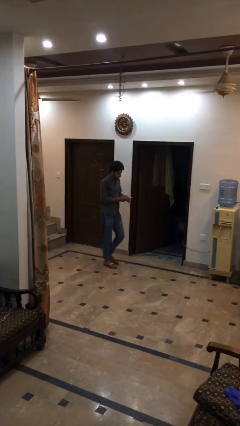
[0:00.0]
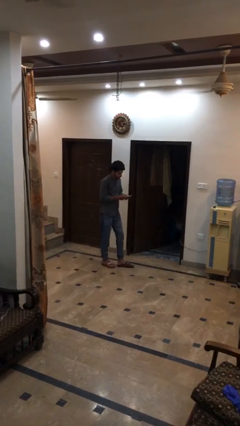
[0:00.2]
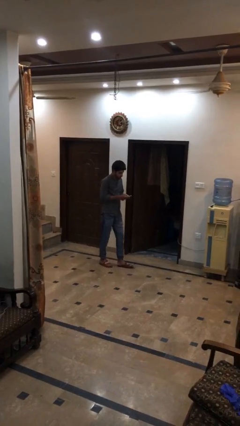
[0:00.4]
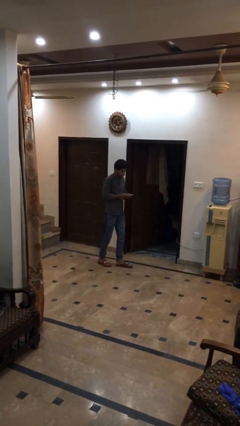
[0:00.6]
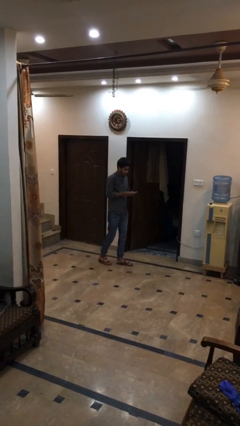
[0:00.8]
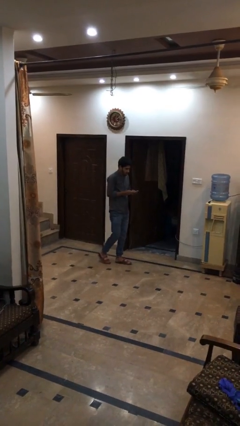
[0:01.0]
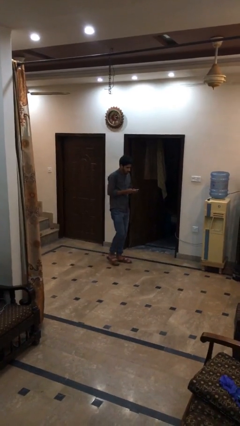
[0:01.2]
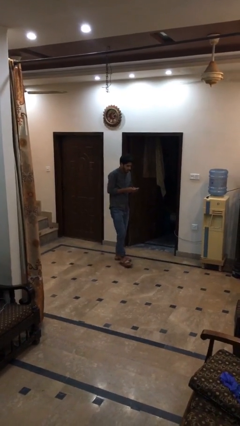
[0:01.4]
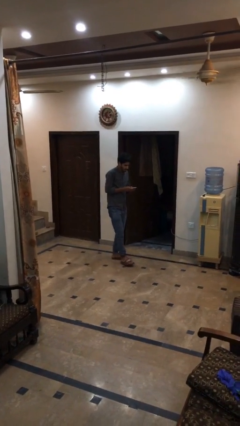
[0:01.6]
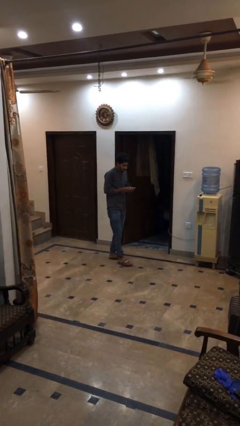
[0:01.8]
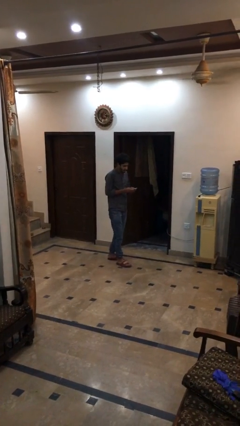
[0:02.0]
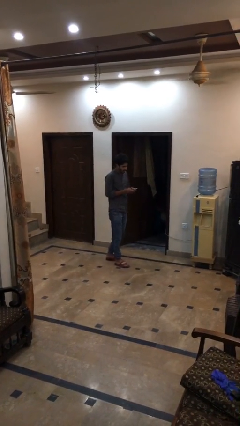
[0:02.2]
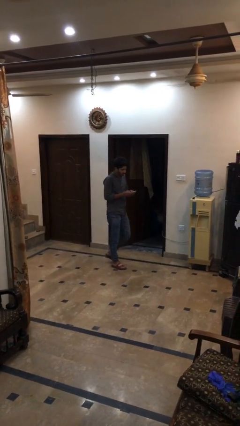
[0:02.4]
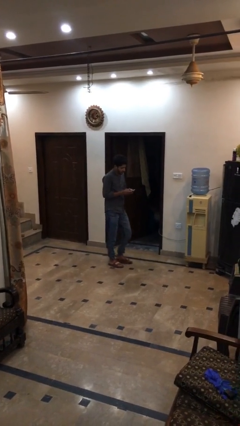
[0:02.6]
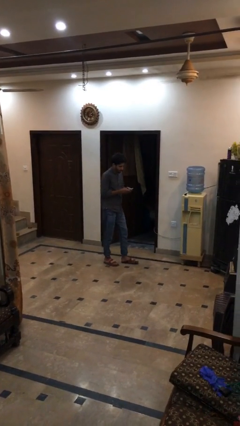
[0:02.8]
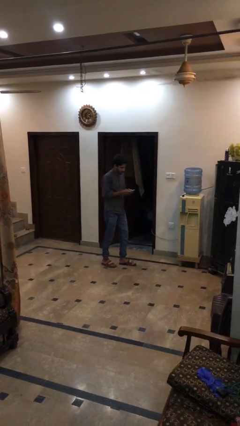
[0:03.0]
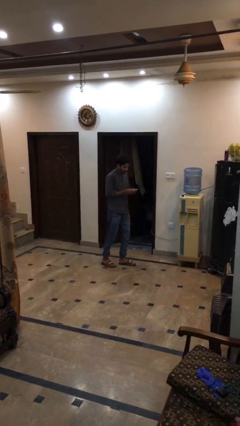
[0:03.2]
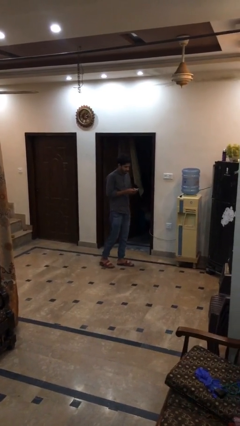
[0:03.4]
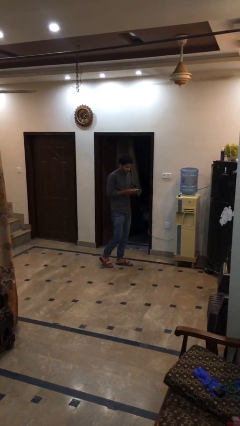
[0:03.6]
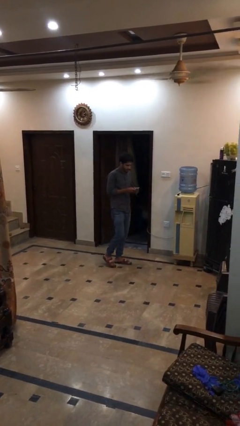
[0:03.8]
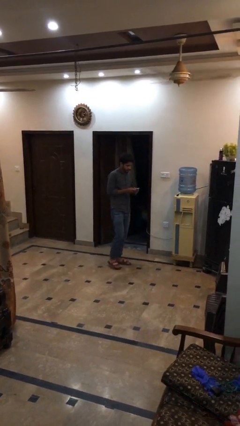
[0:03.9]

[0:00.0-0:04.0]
person texts on phone

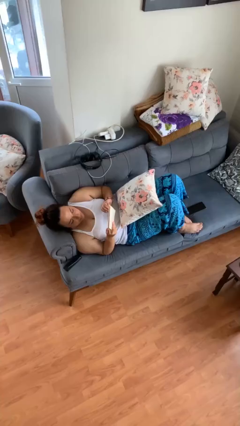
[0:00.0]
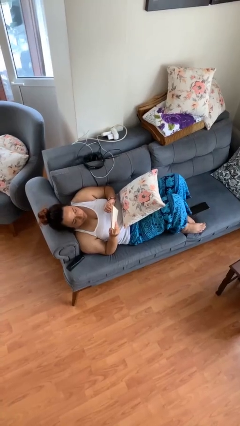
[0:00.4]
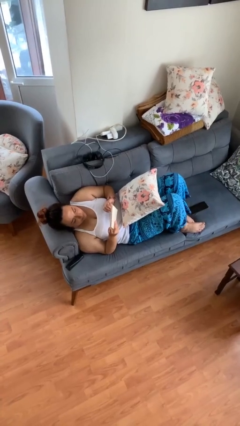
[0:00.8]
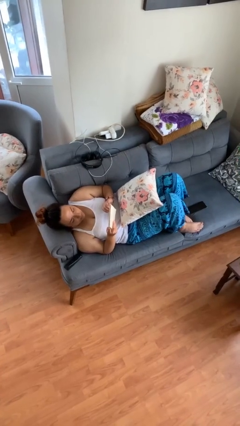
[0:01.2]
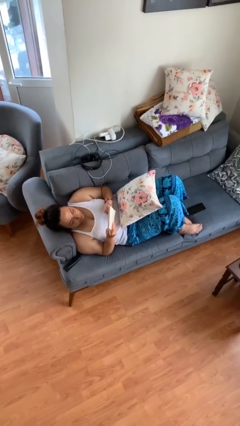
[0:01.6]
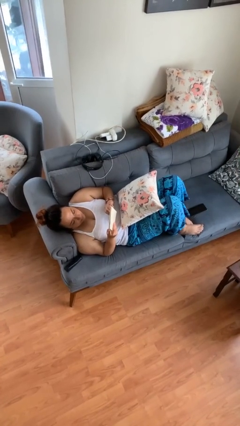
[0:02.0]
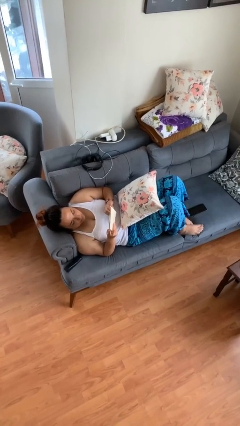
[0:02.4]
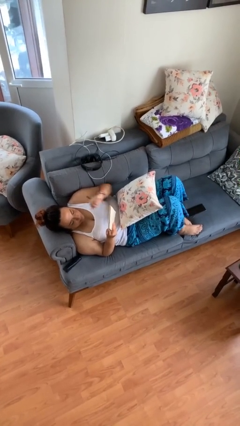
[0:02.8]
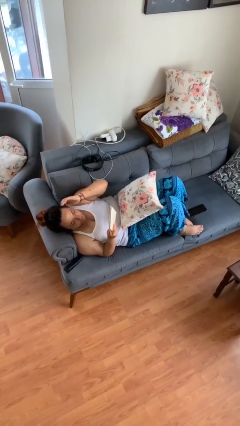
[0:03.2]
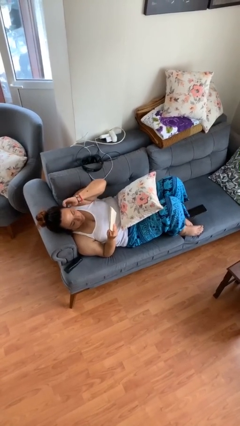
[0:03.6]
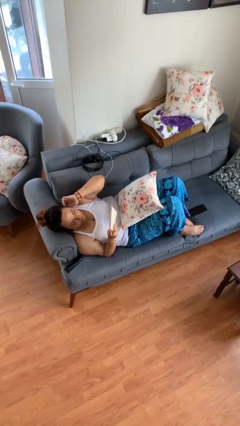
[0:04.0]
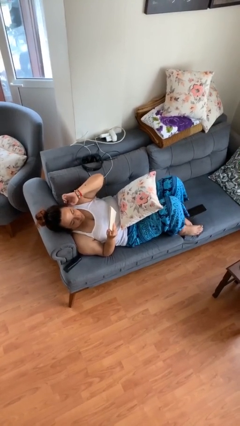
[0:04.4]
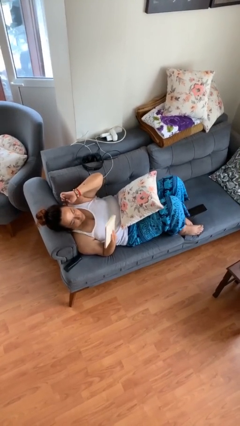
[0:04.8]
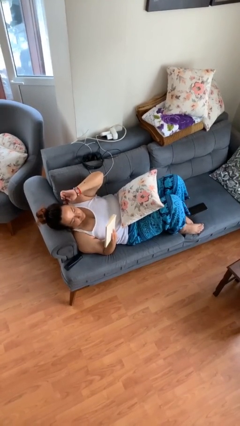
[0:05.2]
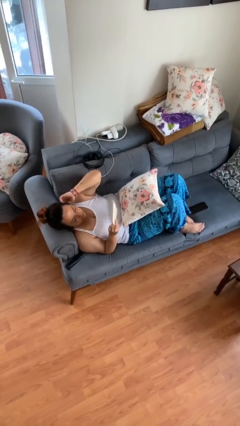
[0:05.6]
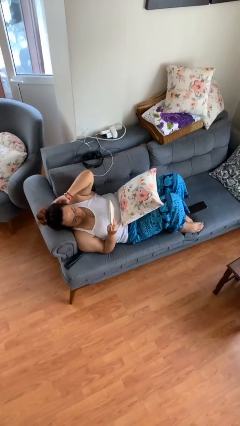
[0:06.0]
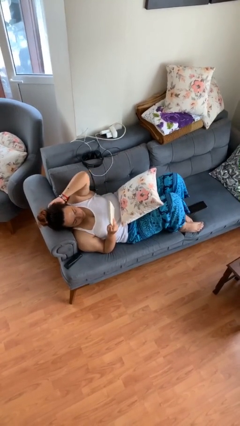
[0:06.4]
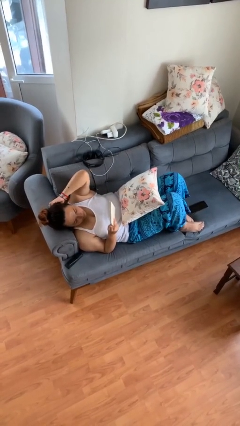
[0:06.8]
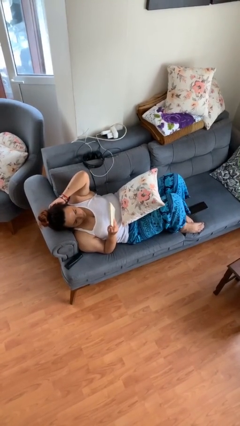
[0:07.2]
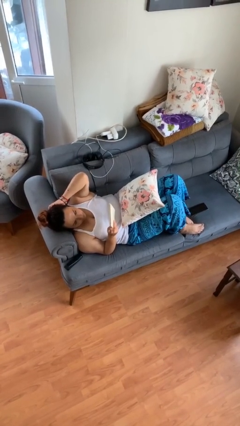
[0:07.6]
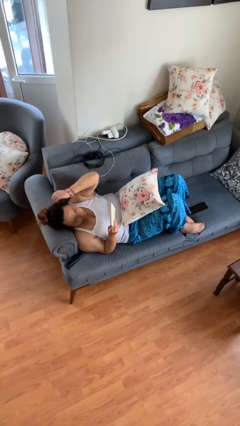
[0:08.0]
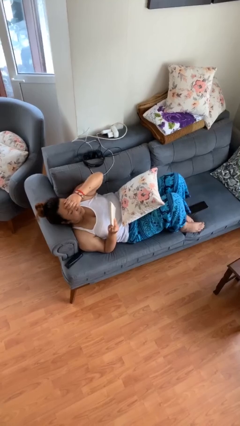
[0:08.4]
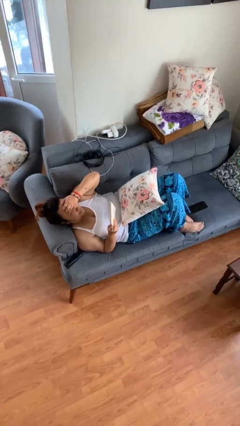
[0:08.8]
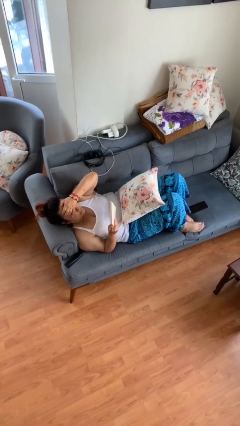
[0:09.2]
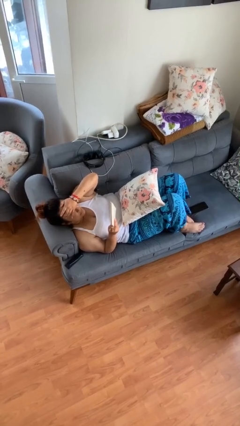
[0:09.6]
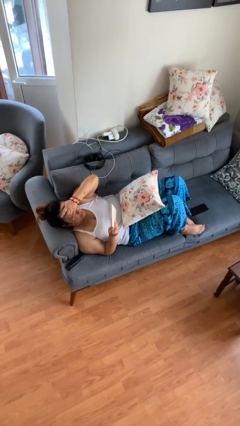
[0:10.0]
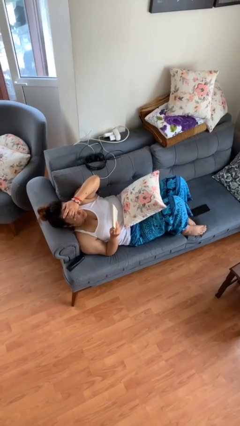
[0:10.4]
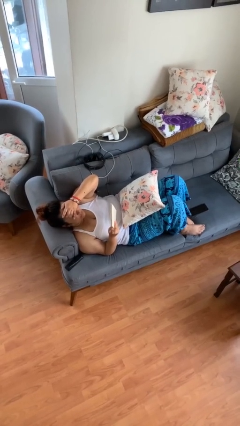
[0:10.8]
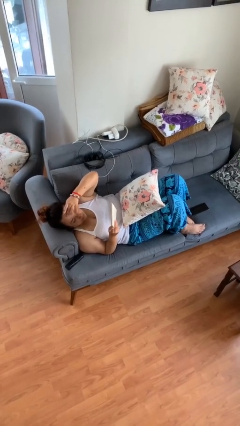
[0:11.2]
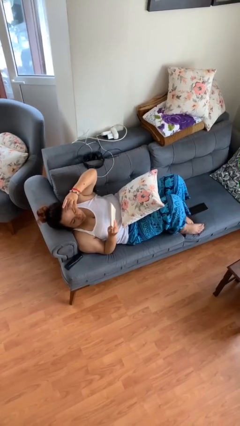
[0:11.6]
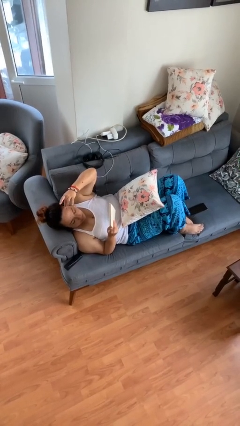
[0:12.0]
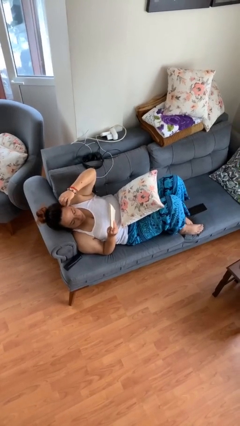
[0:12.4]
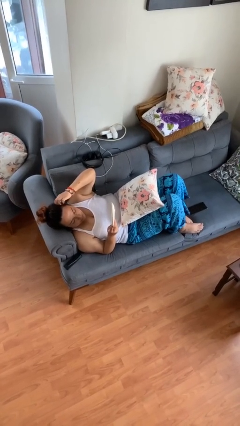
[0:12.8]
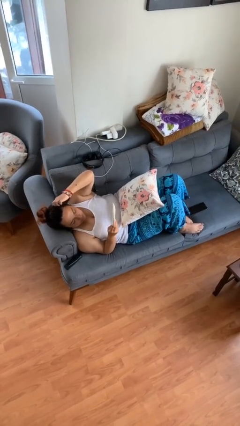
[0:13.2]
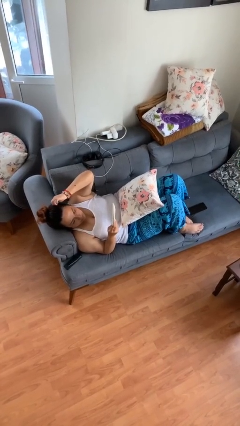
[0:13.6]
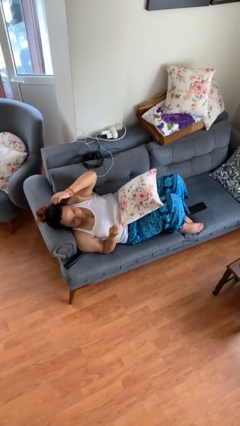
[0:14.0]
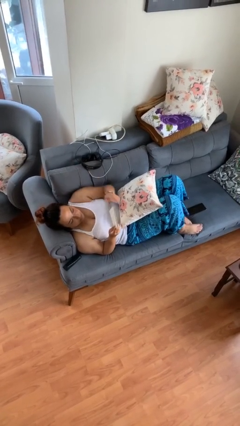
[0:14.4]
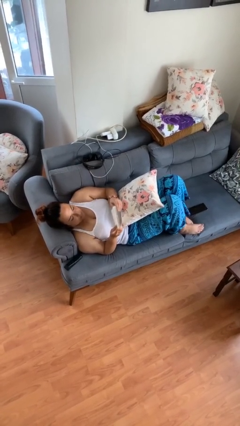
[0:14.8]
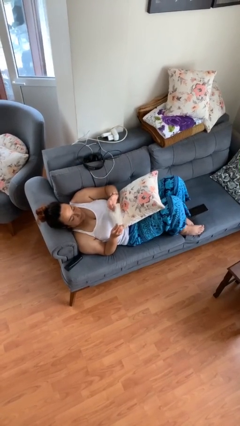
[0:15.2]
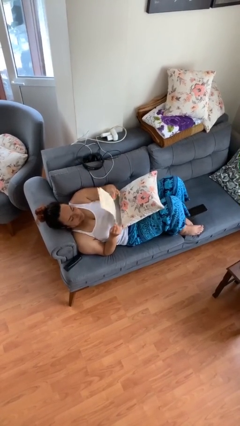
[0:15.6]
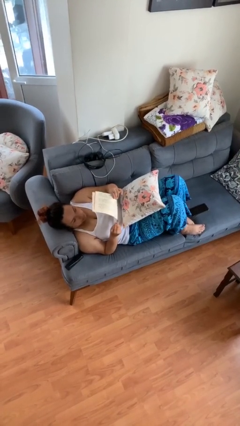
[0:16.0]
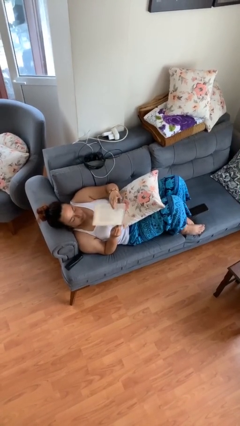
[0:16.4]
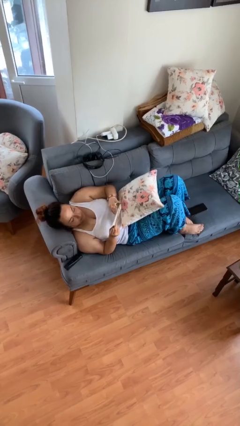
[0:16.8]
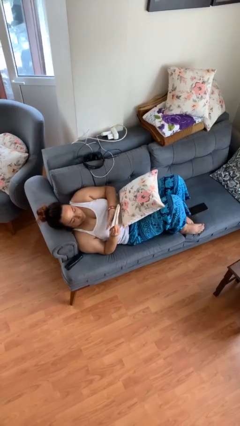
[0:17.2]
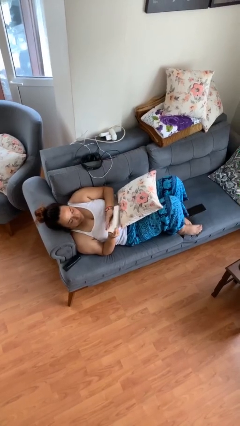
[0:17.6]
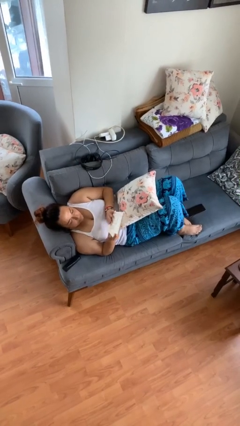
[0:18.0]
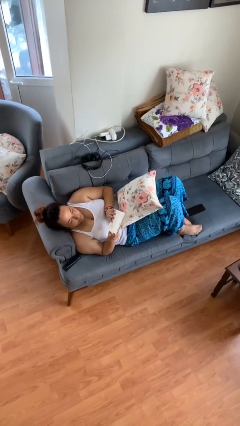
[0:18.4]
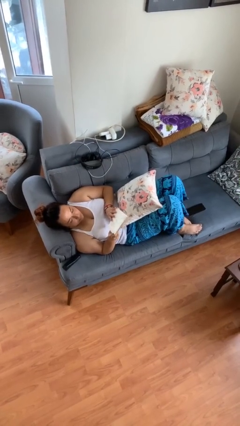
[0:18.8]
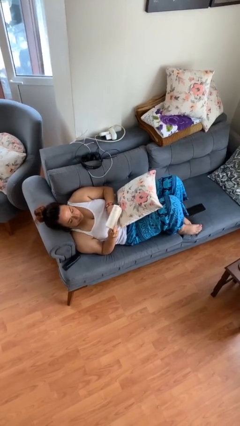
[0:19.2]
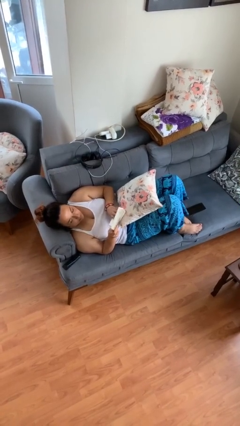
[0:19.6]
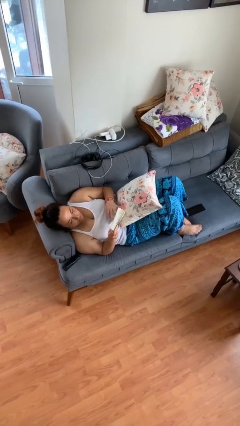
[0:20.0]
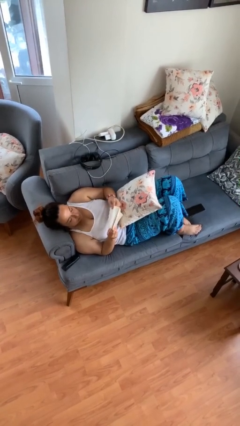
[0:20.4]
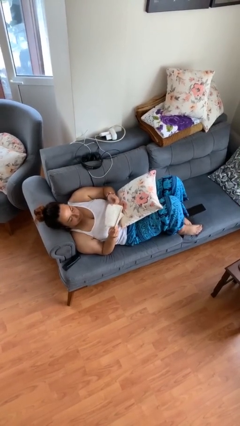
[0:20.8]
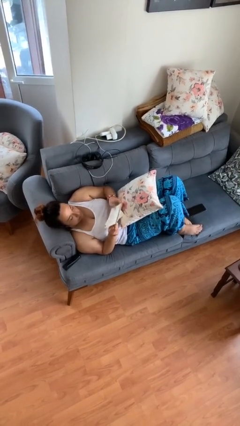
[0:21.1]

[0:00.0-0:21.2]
person reads document

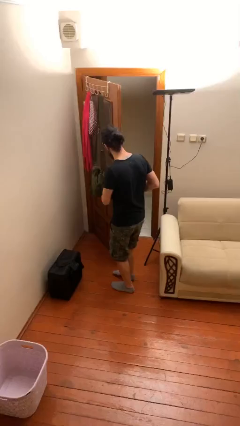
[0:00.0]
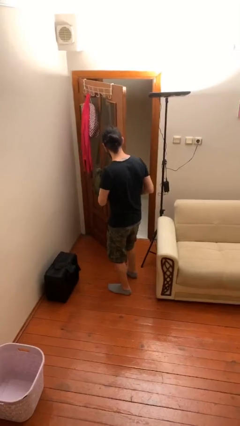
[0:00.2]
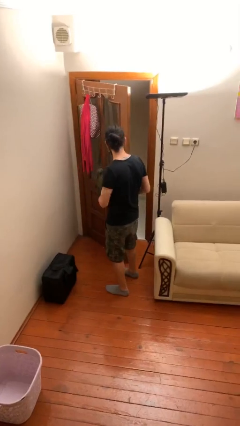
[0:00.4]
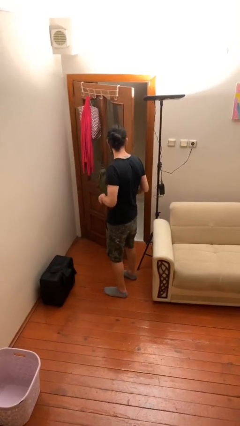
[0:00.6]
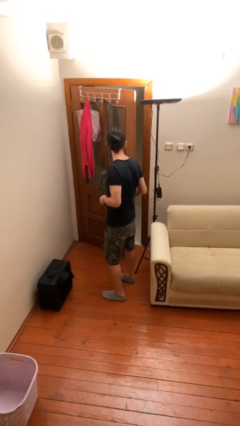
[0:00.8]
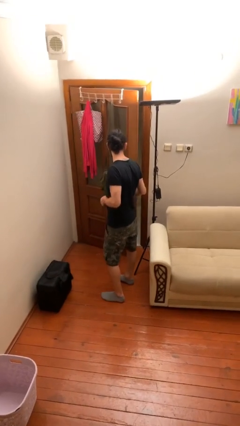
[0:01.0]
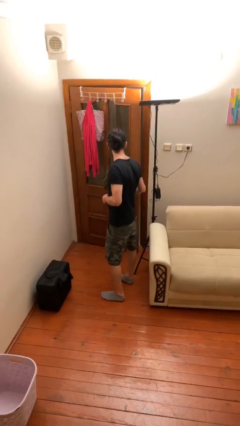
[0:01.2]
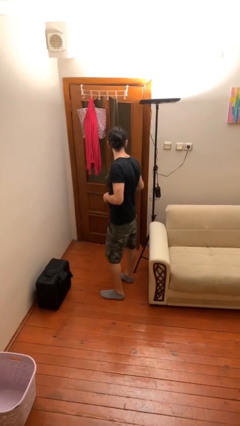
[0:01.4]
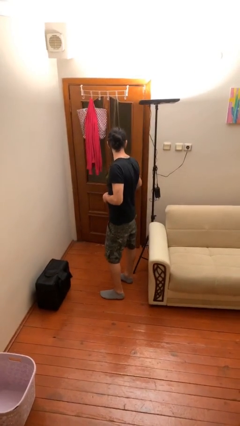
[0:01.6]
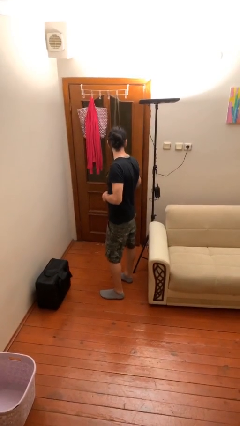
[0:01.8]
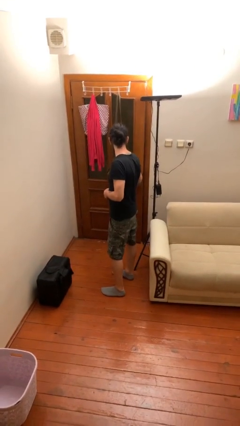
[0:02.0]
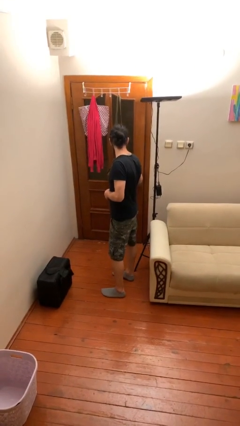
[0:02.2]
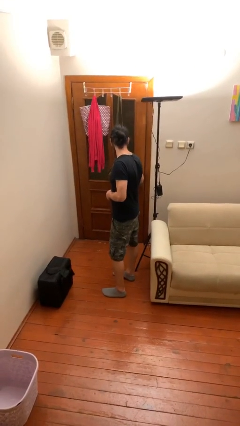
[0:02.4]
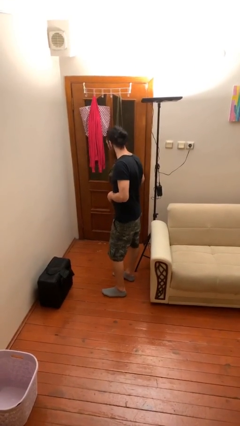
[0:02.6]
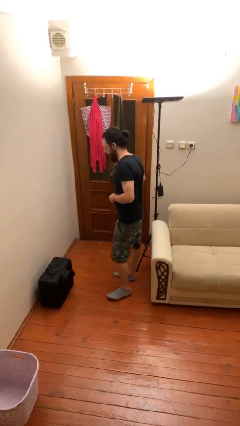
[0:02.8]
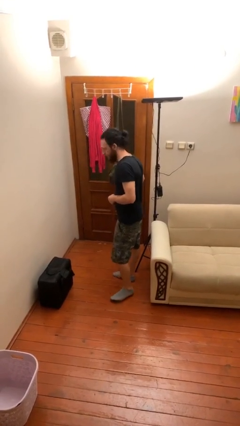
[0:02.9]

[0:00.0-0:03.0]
person closes facility door

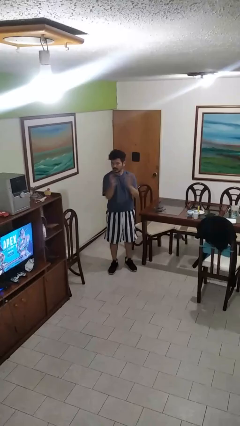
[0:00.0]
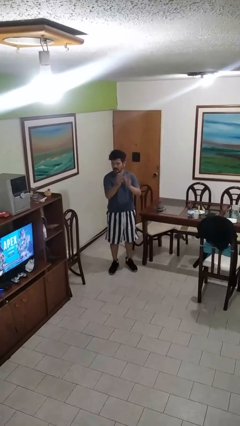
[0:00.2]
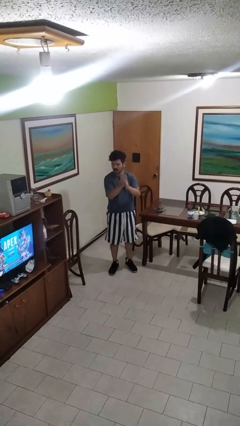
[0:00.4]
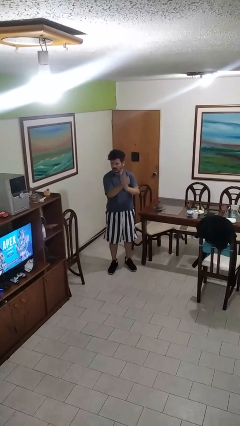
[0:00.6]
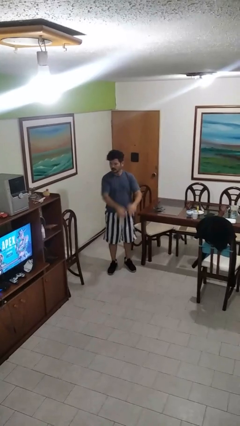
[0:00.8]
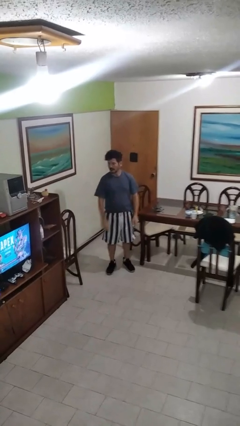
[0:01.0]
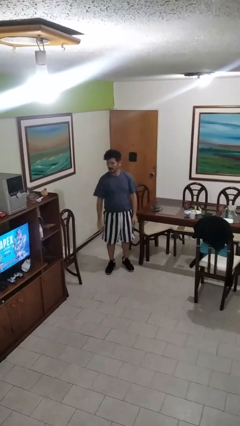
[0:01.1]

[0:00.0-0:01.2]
person claps hands
